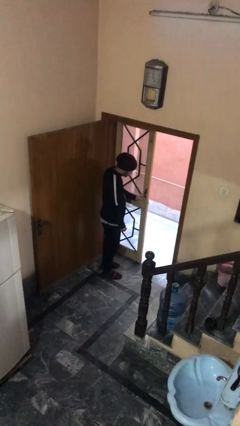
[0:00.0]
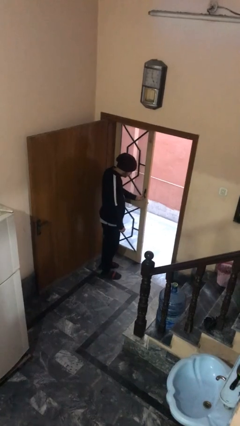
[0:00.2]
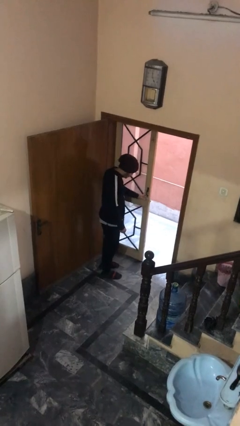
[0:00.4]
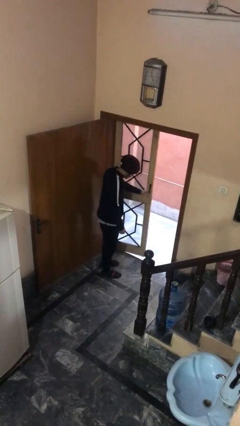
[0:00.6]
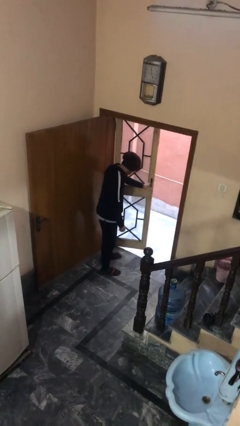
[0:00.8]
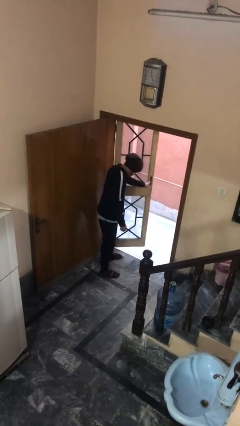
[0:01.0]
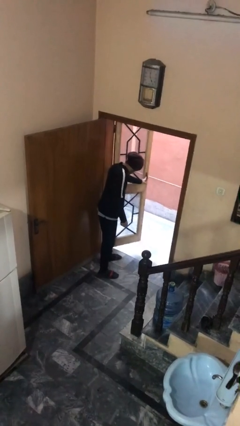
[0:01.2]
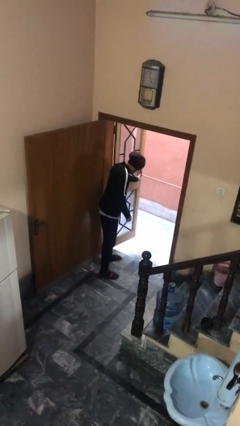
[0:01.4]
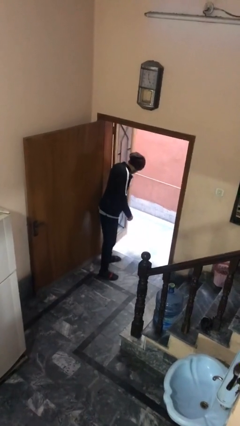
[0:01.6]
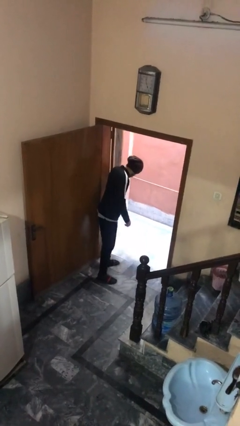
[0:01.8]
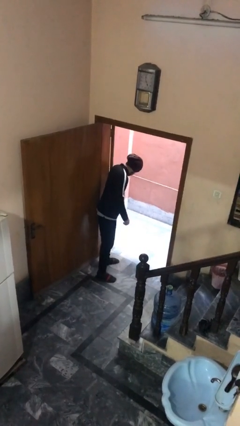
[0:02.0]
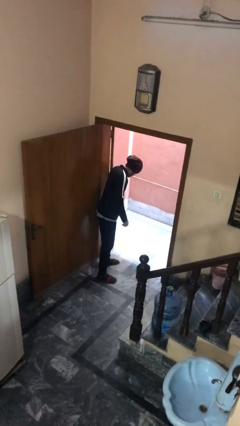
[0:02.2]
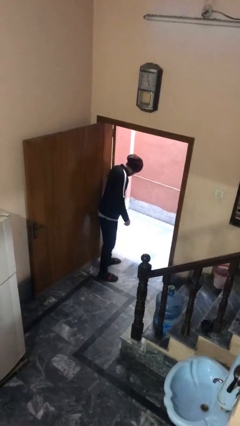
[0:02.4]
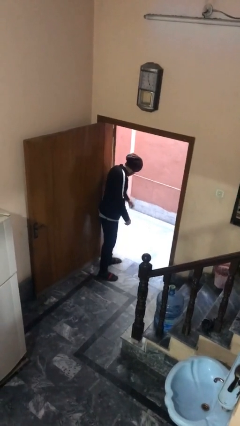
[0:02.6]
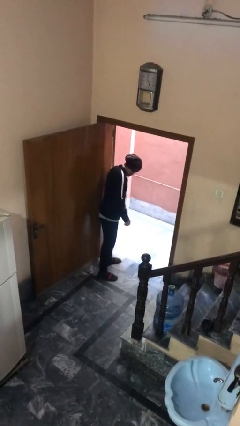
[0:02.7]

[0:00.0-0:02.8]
person opens facility door

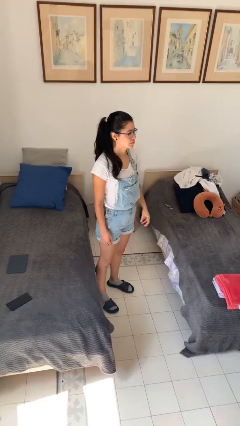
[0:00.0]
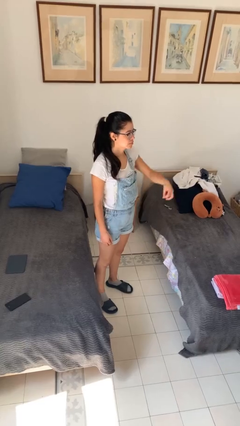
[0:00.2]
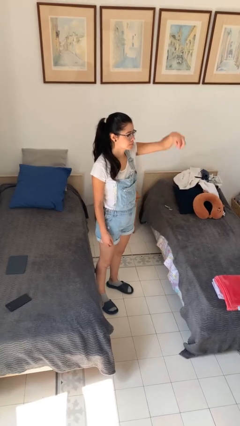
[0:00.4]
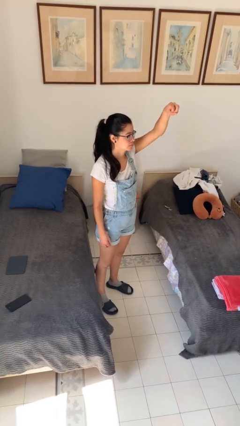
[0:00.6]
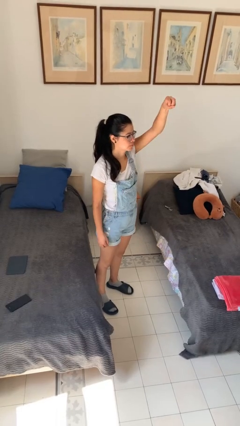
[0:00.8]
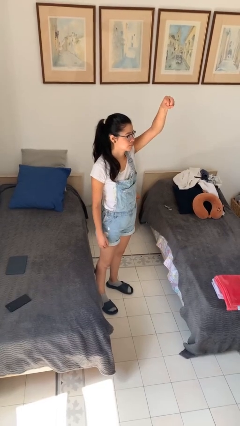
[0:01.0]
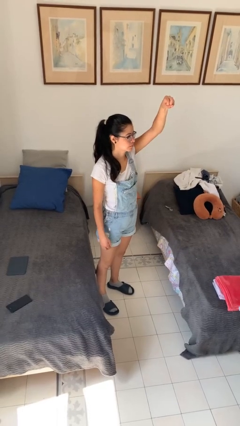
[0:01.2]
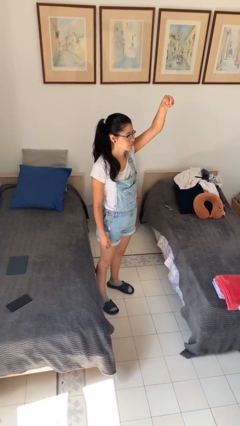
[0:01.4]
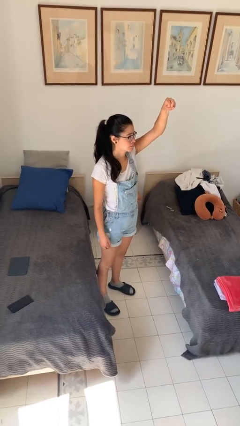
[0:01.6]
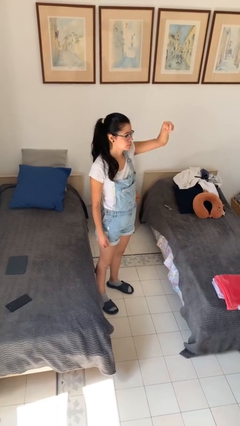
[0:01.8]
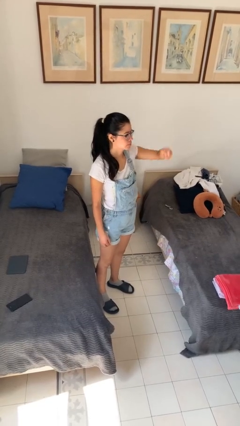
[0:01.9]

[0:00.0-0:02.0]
person gestures hang loose

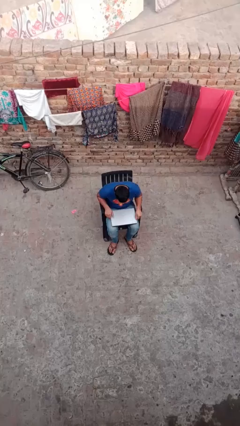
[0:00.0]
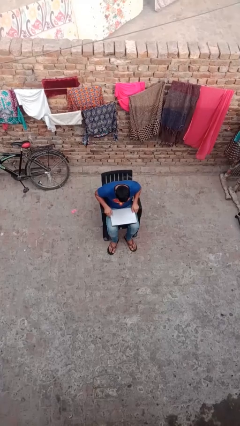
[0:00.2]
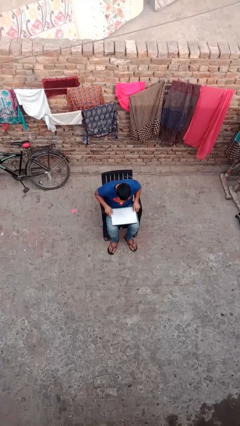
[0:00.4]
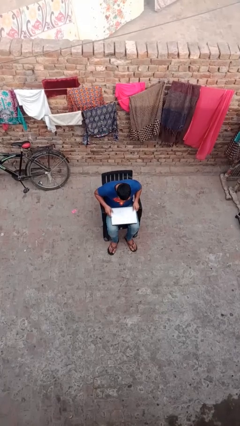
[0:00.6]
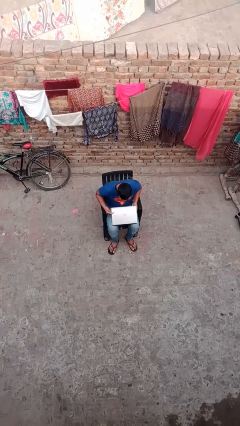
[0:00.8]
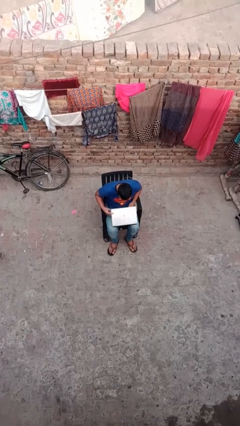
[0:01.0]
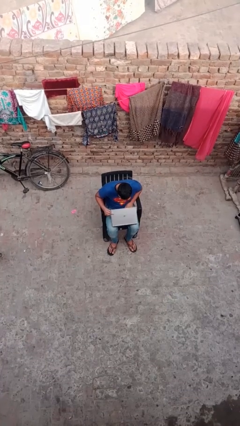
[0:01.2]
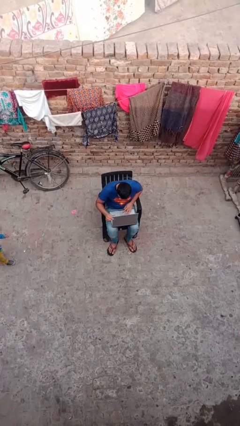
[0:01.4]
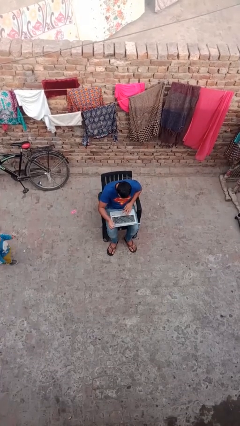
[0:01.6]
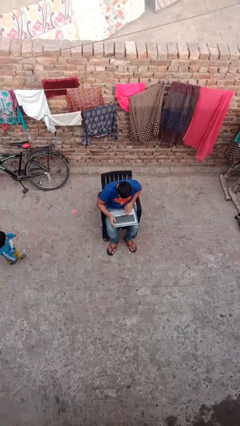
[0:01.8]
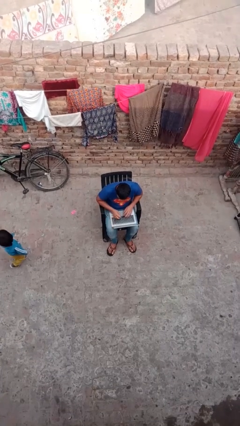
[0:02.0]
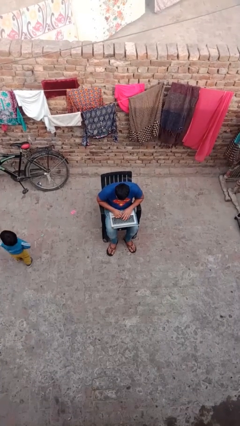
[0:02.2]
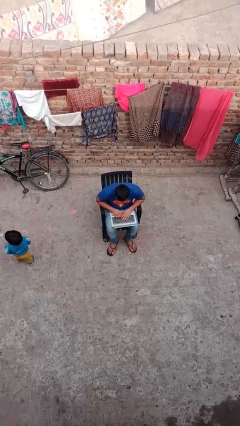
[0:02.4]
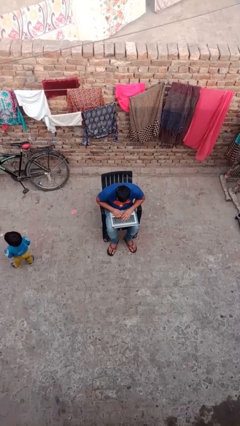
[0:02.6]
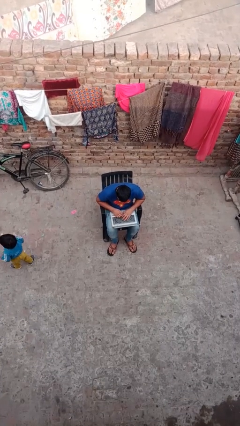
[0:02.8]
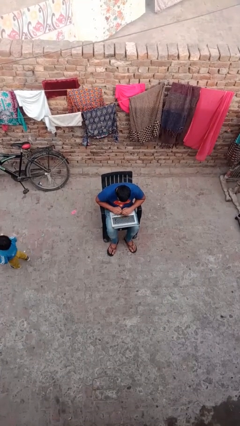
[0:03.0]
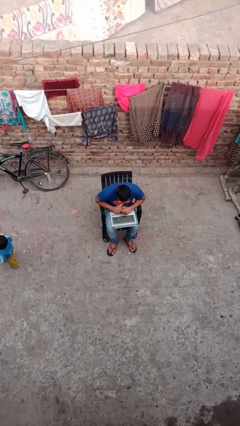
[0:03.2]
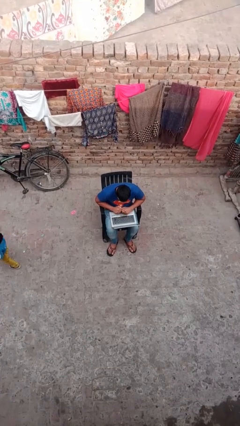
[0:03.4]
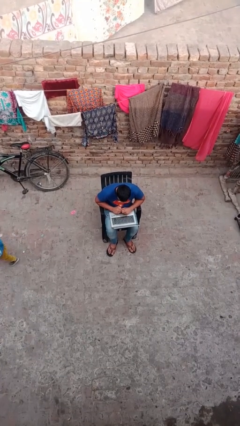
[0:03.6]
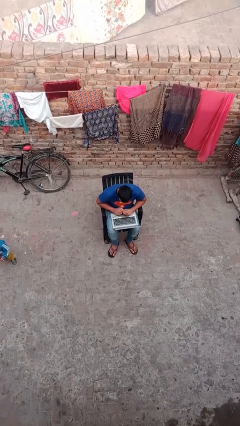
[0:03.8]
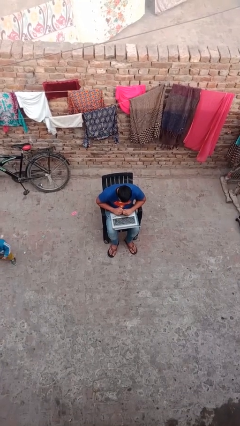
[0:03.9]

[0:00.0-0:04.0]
person interacts with laptop

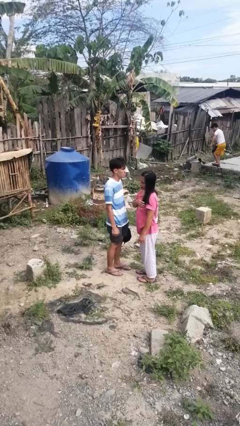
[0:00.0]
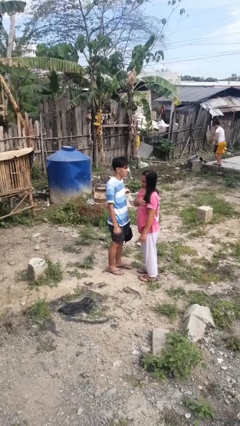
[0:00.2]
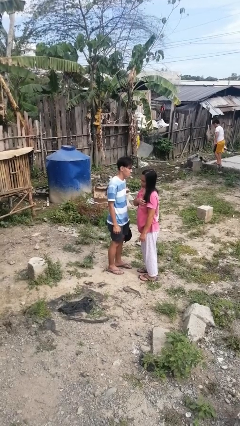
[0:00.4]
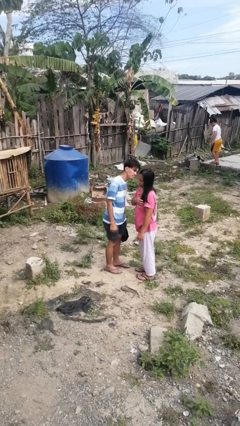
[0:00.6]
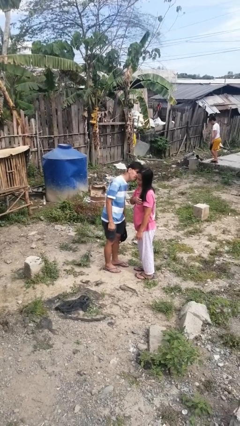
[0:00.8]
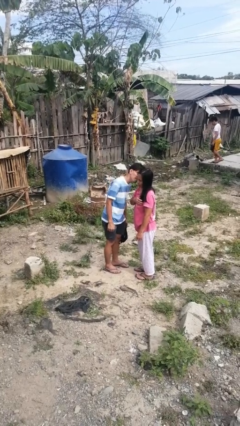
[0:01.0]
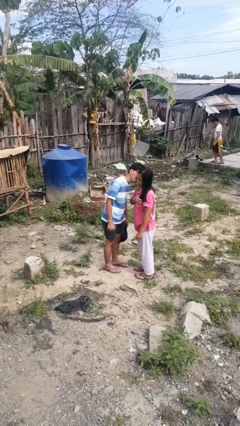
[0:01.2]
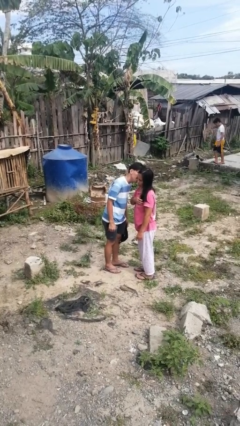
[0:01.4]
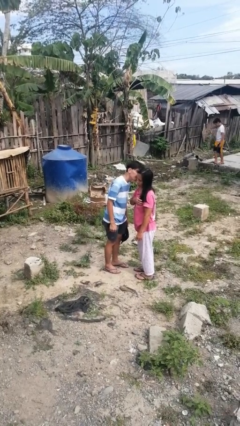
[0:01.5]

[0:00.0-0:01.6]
person kisses cheek of person

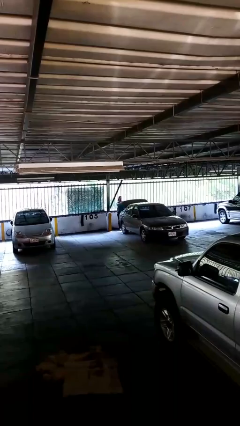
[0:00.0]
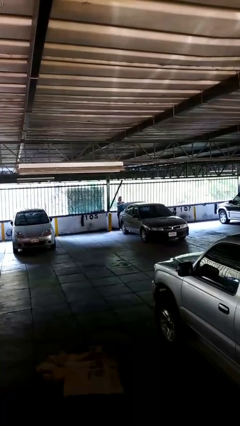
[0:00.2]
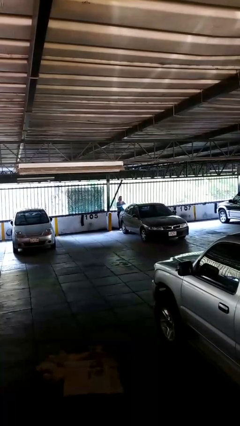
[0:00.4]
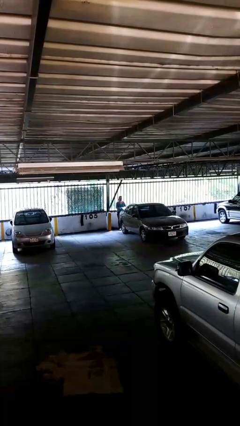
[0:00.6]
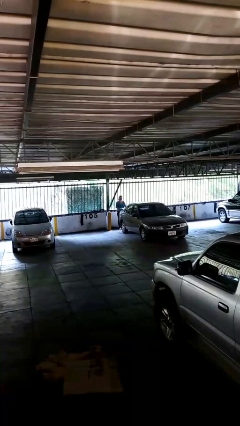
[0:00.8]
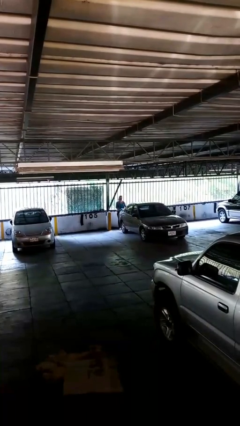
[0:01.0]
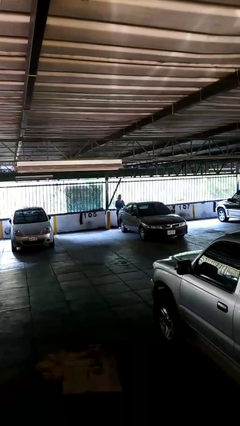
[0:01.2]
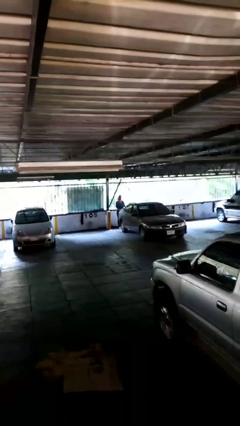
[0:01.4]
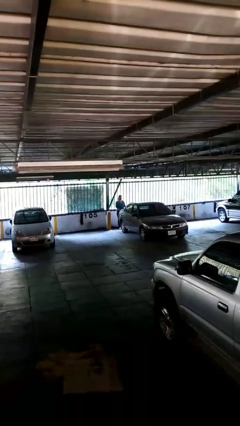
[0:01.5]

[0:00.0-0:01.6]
person closes car trunk

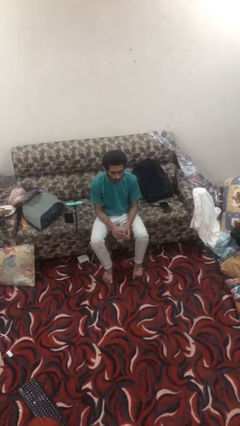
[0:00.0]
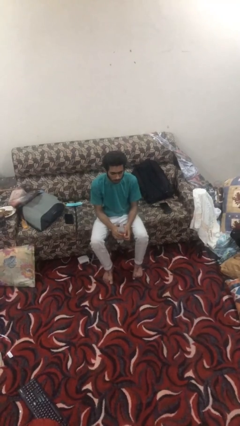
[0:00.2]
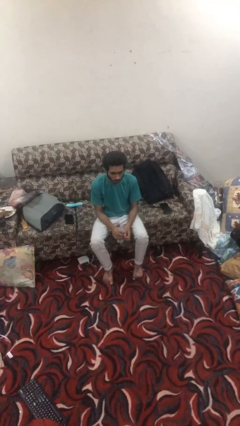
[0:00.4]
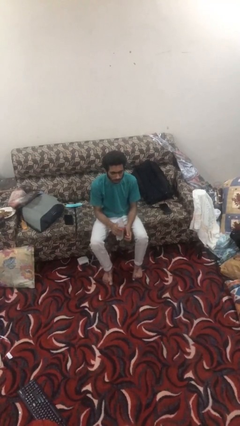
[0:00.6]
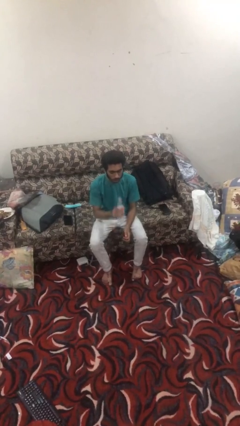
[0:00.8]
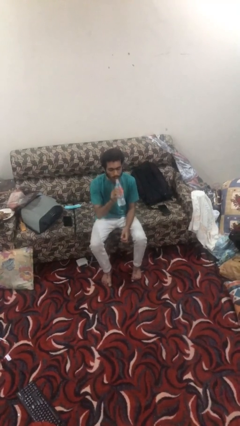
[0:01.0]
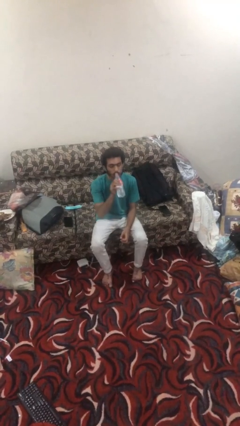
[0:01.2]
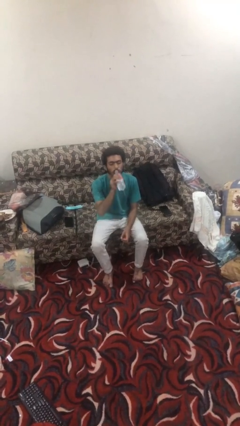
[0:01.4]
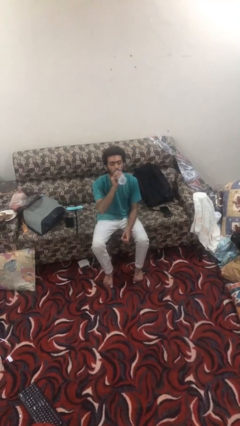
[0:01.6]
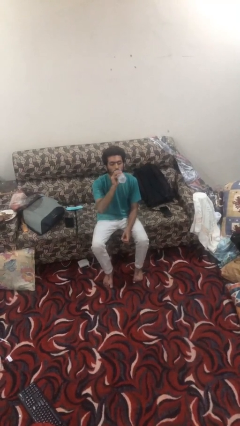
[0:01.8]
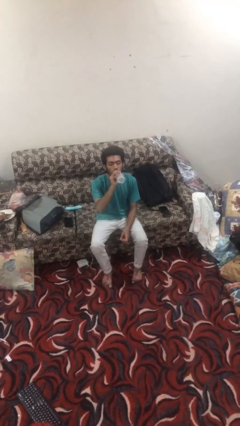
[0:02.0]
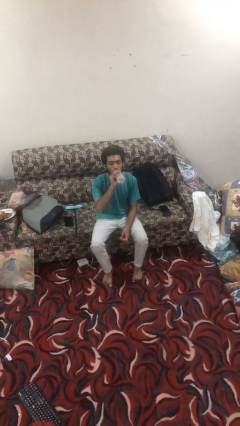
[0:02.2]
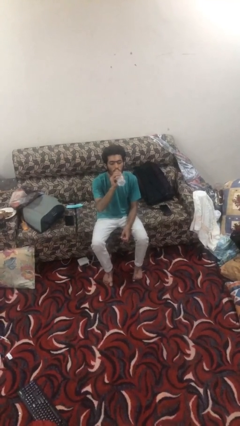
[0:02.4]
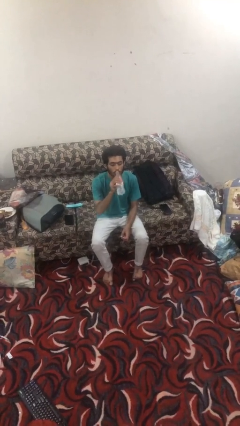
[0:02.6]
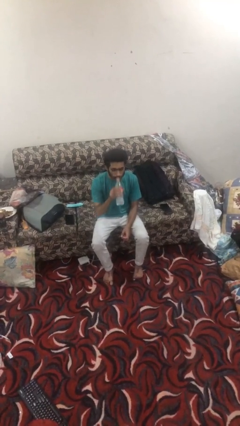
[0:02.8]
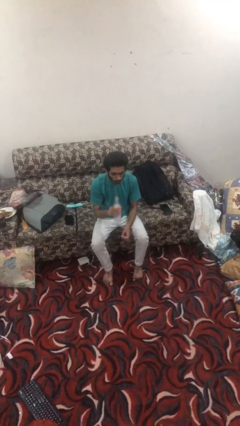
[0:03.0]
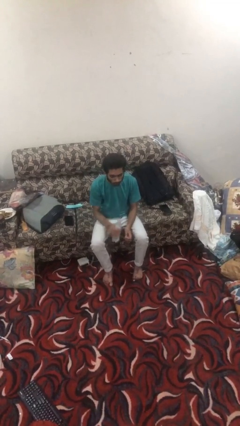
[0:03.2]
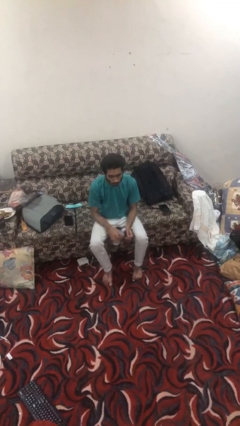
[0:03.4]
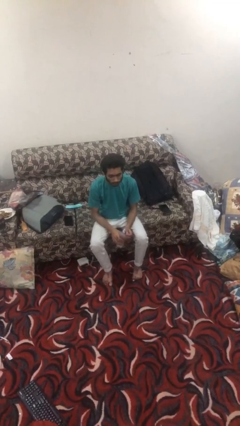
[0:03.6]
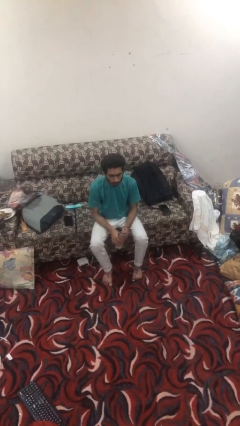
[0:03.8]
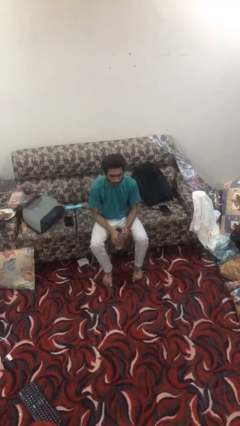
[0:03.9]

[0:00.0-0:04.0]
person drinks from bottle

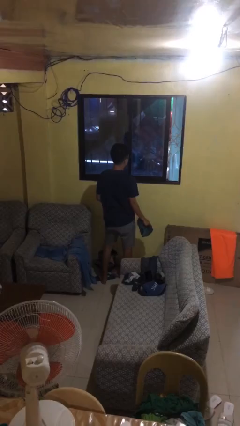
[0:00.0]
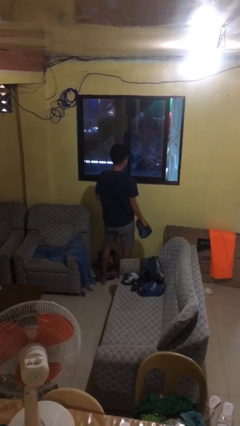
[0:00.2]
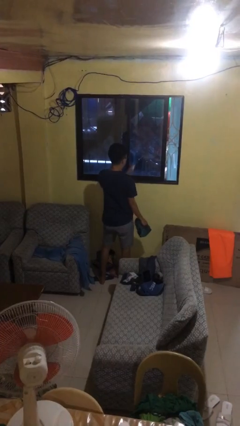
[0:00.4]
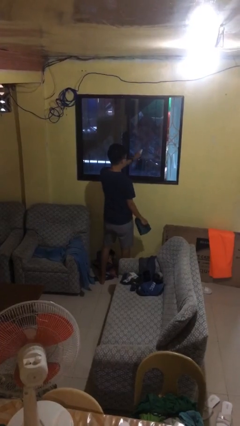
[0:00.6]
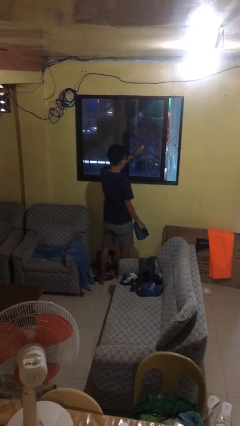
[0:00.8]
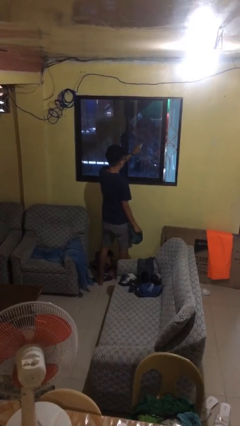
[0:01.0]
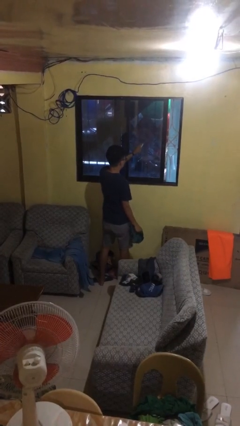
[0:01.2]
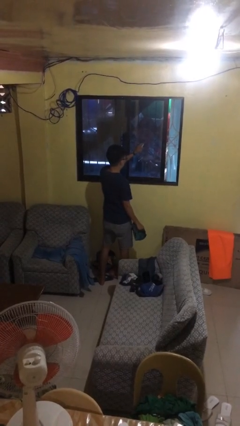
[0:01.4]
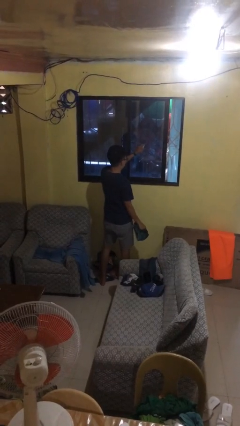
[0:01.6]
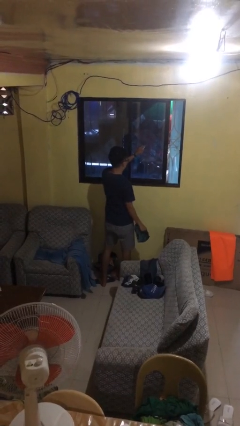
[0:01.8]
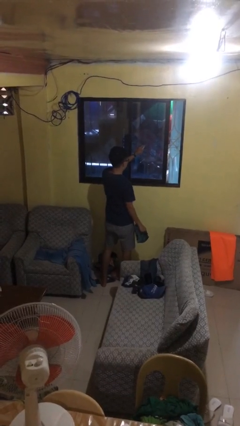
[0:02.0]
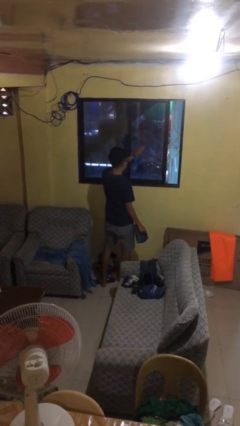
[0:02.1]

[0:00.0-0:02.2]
person sprays from bottle
